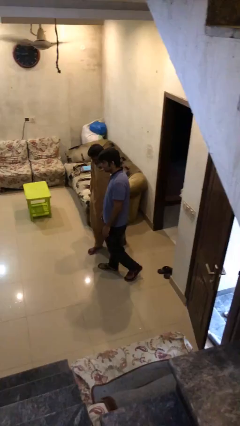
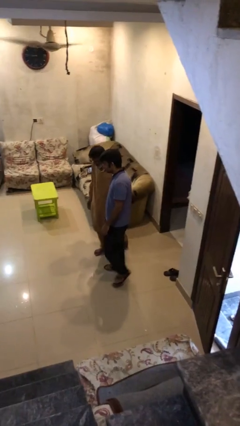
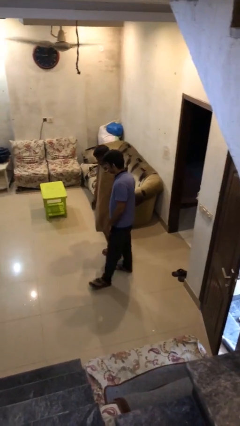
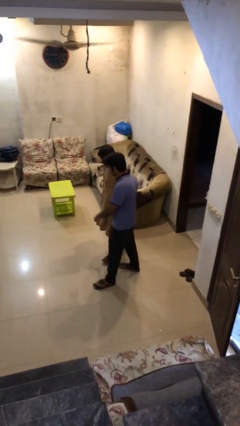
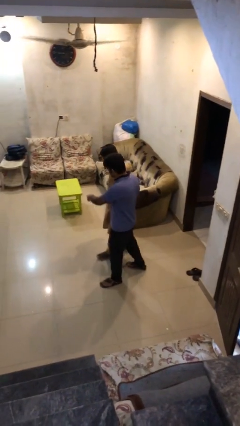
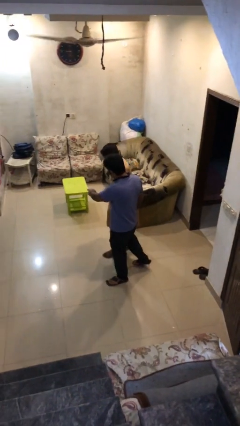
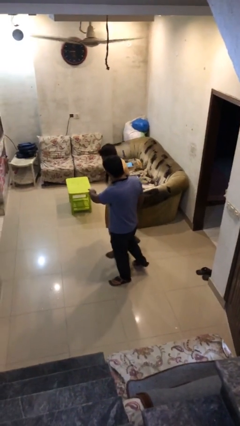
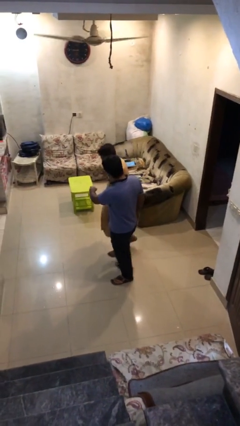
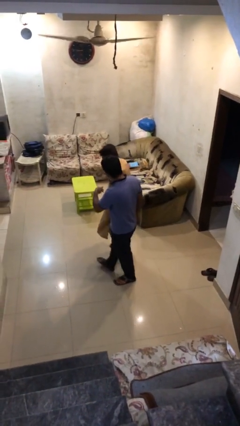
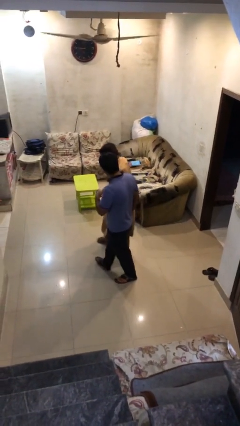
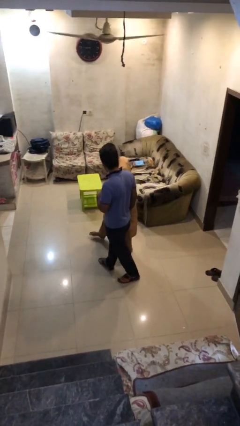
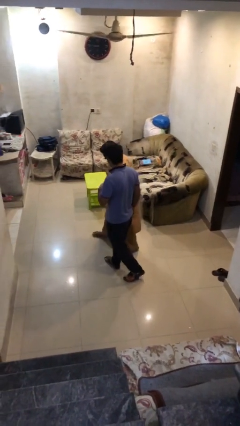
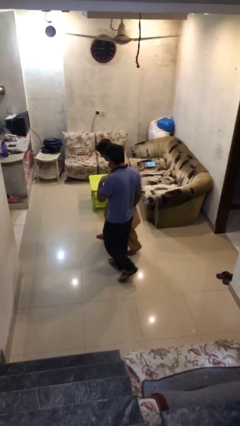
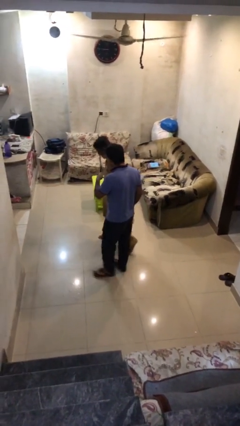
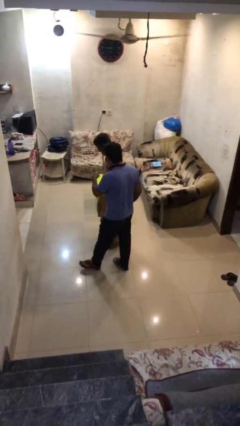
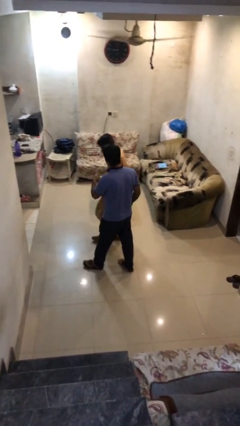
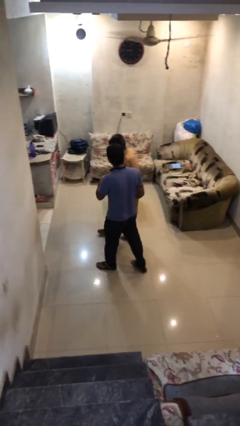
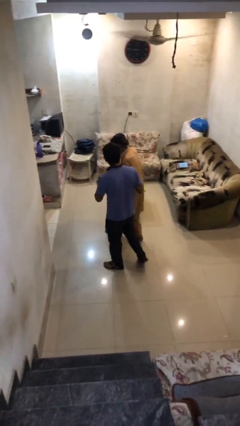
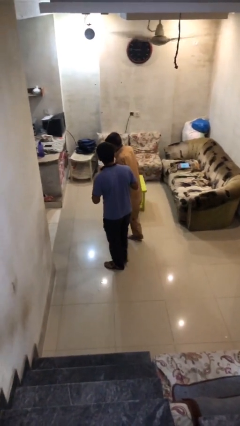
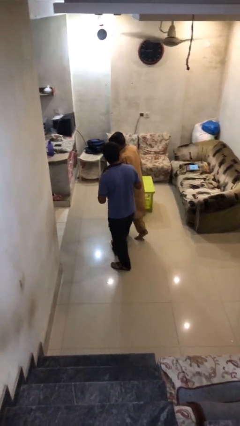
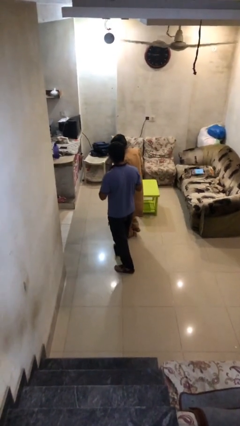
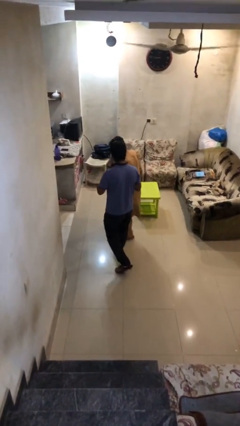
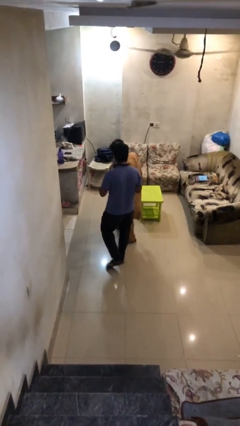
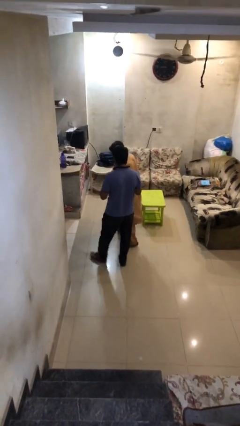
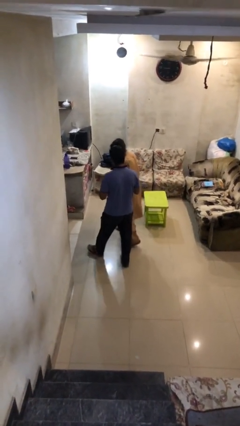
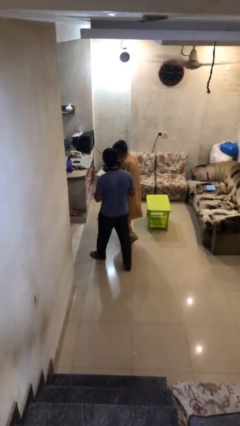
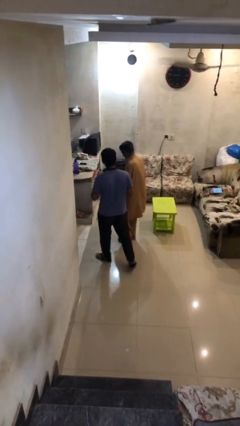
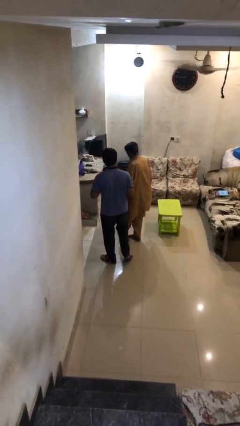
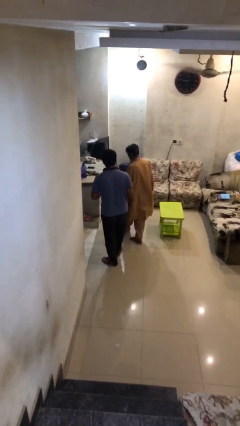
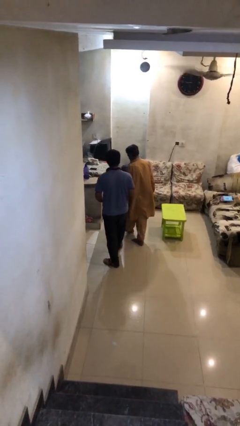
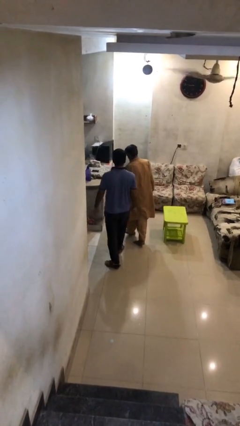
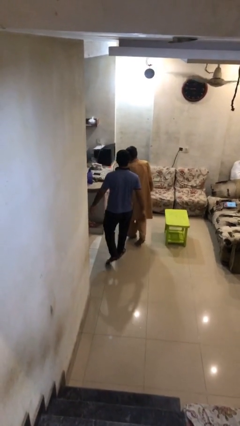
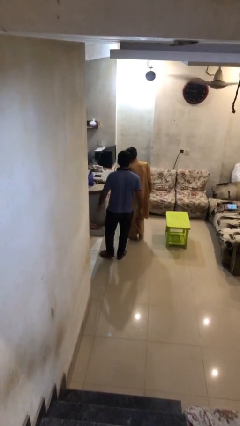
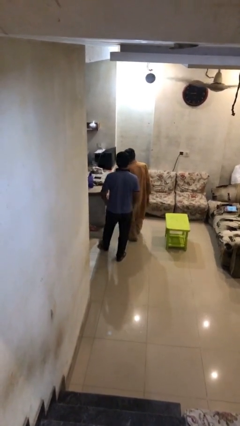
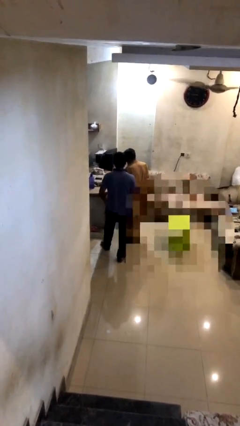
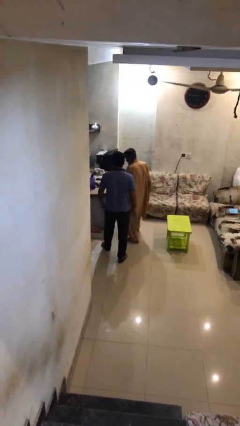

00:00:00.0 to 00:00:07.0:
person talks to person

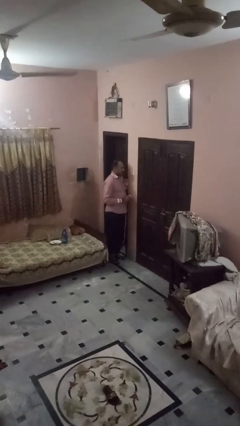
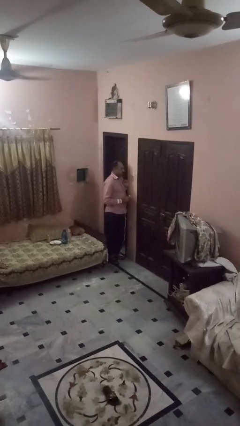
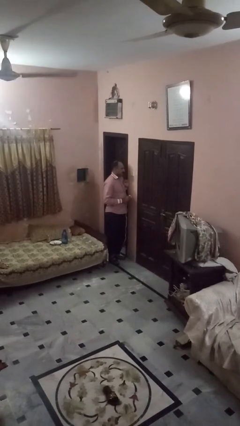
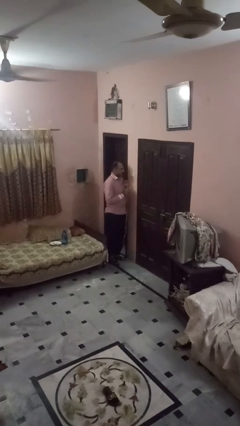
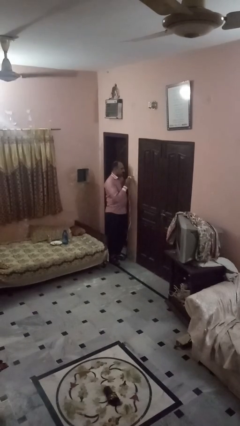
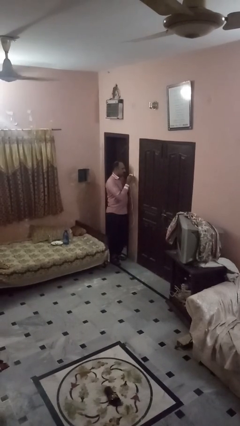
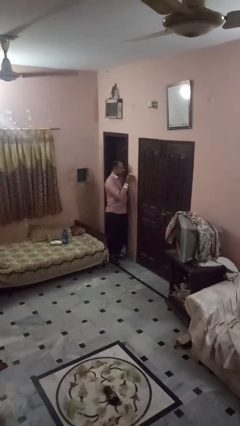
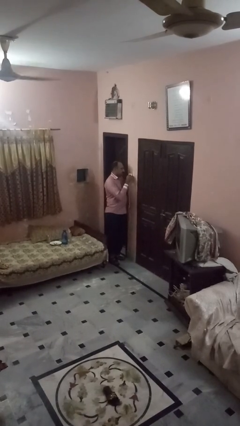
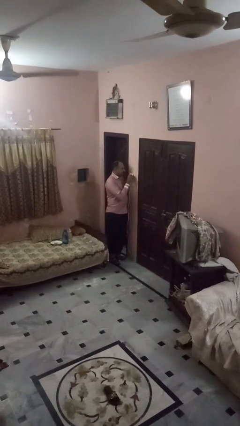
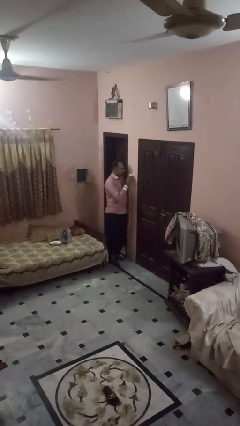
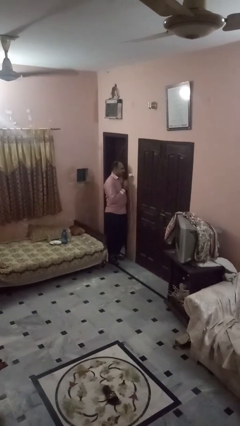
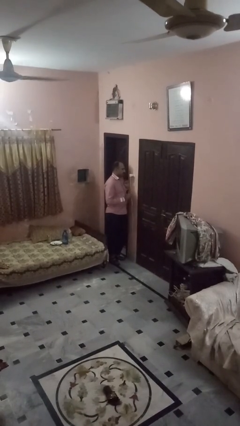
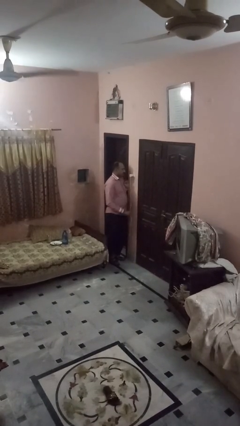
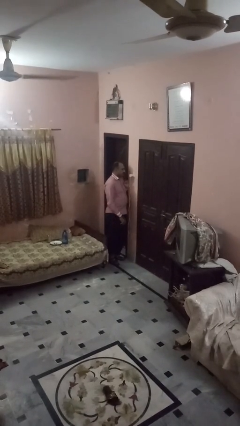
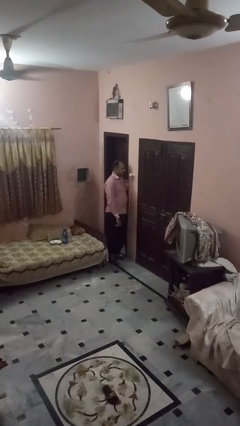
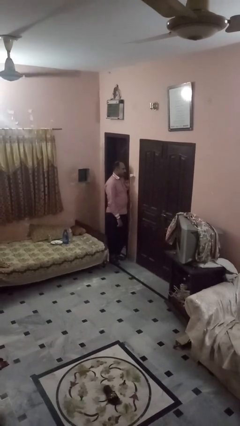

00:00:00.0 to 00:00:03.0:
person plugs into electrical socket

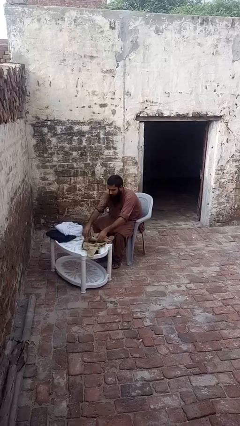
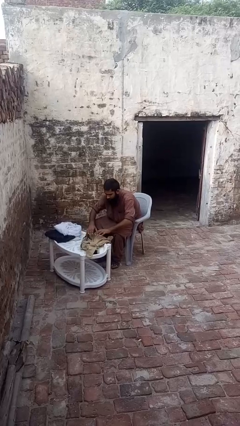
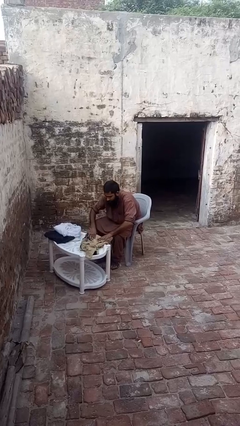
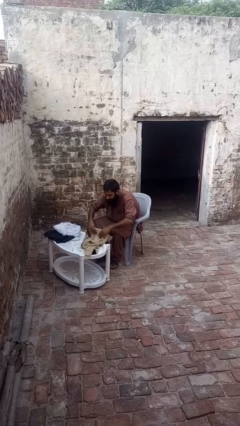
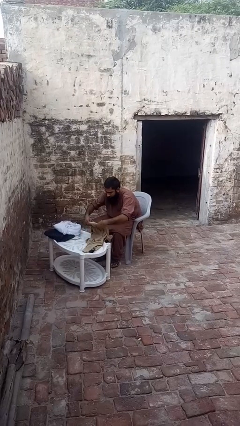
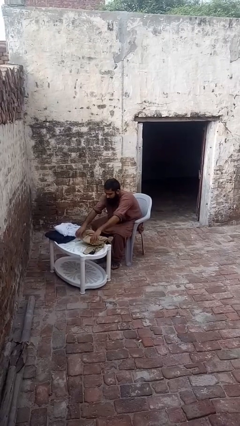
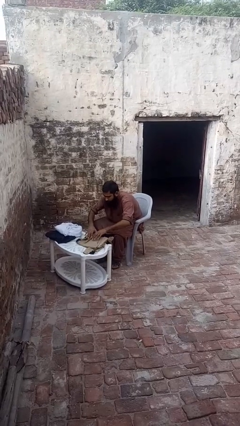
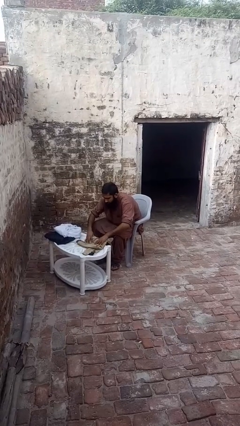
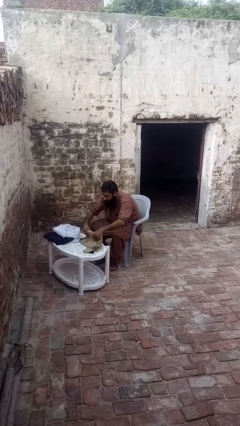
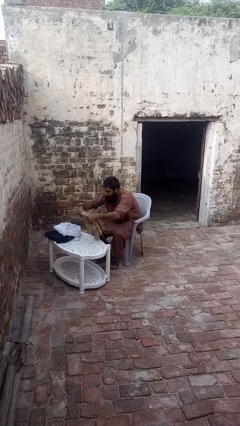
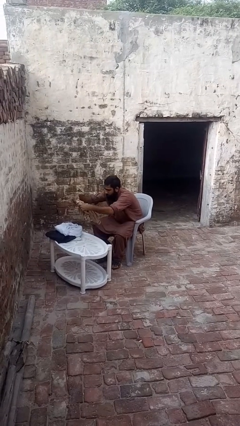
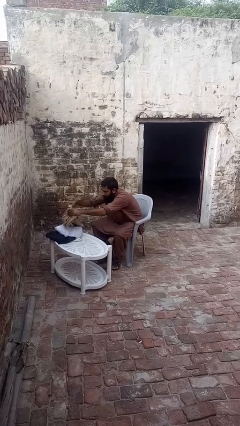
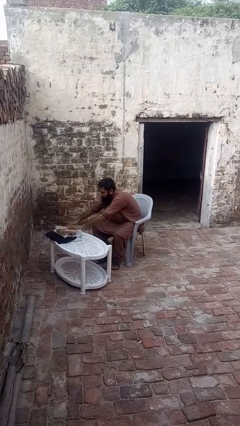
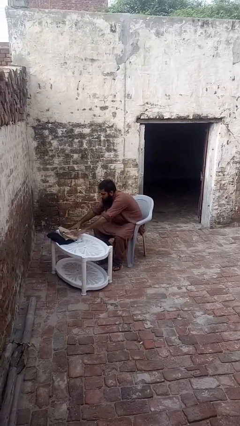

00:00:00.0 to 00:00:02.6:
person folds shirt

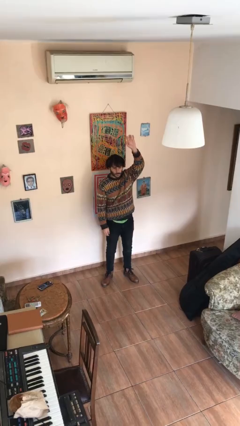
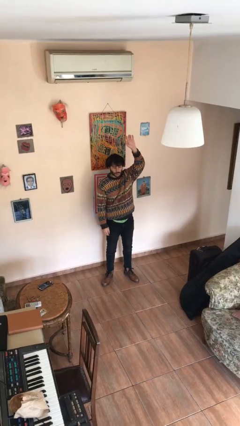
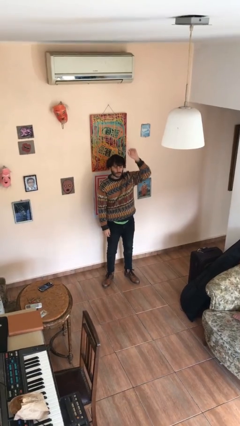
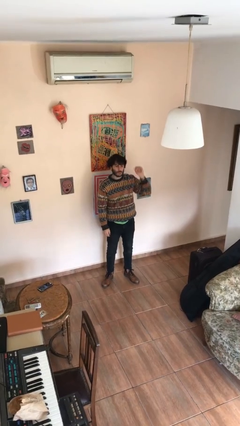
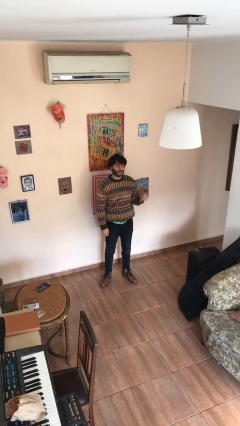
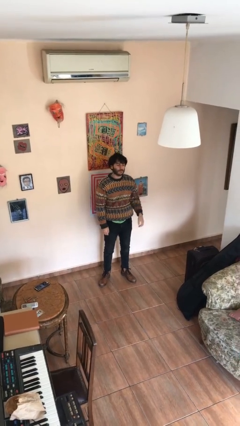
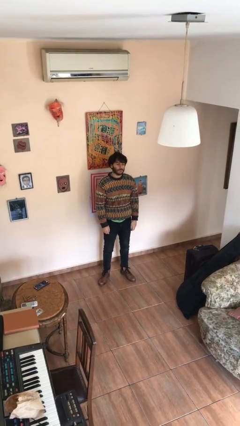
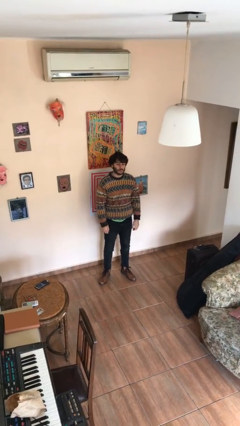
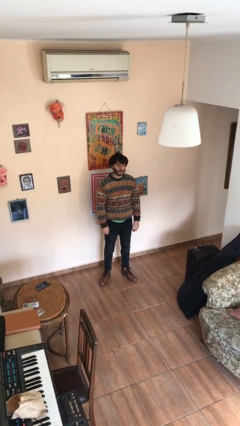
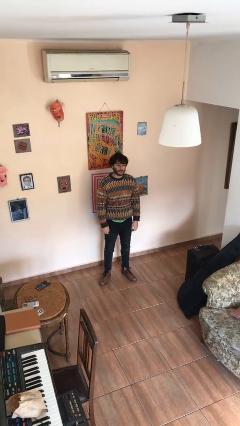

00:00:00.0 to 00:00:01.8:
person gestures lower hand

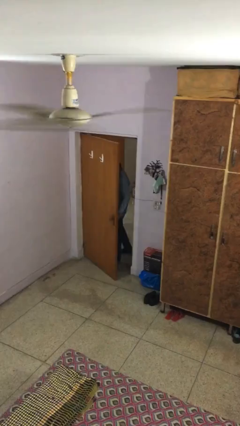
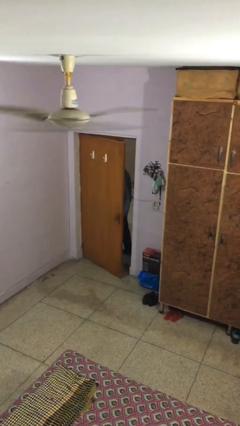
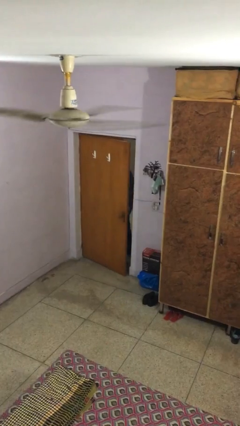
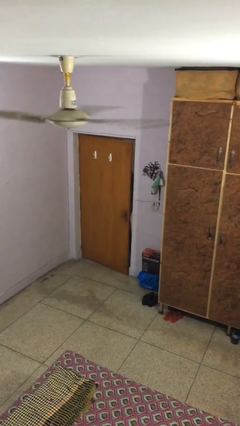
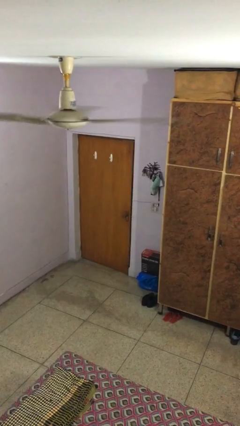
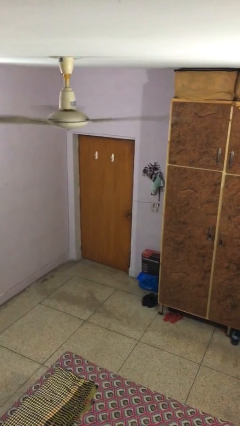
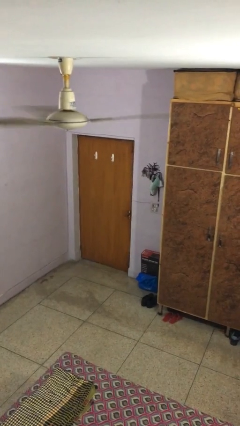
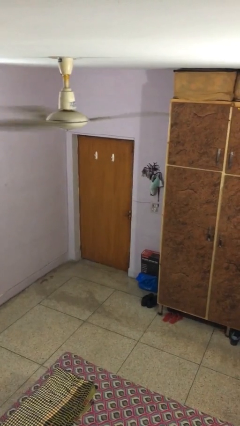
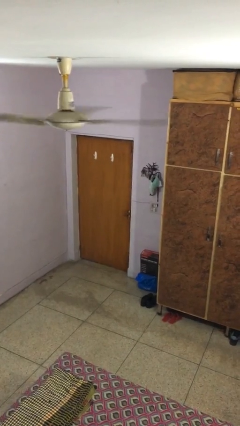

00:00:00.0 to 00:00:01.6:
person closes facility door

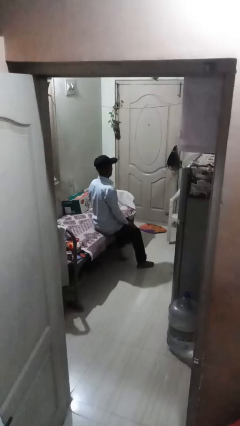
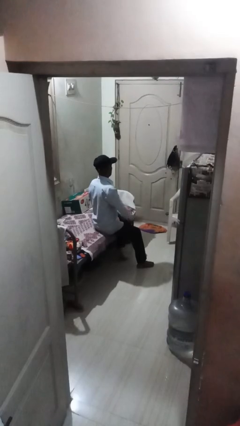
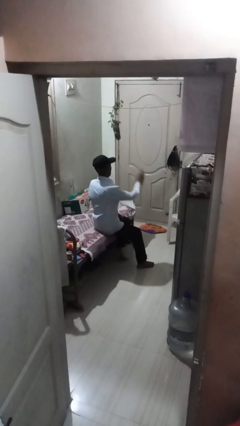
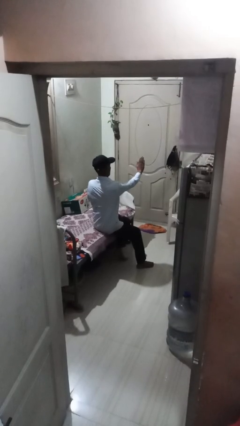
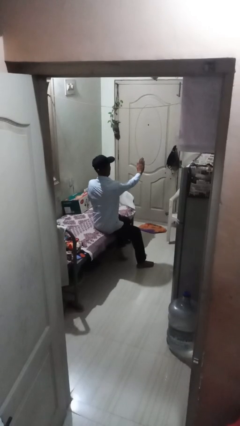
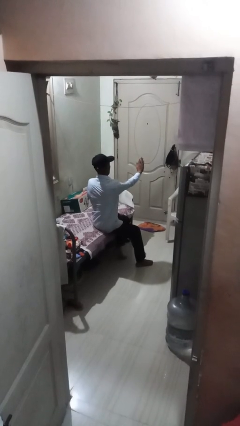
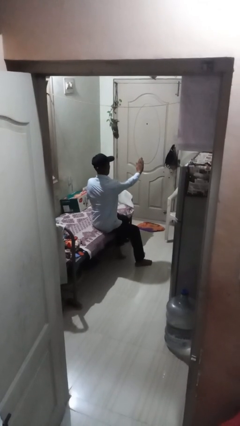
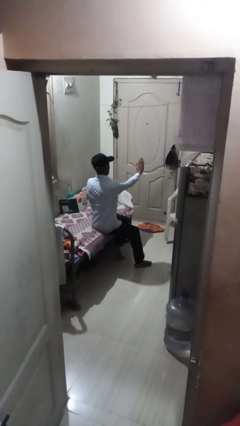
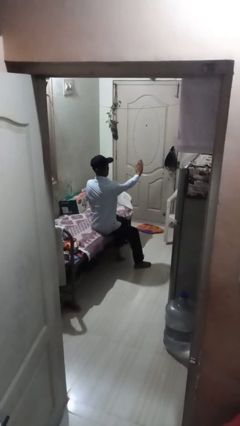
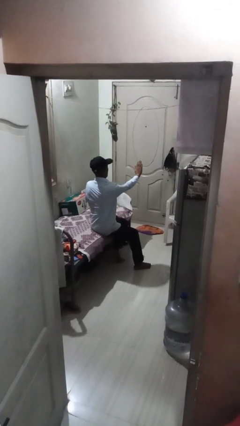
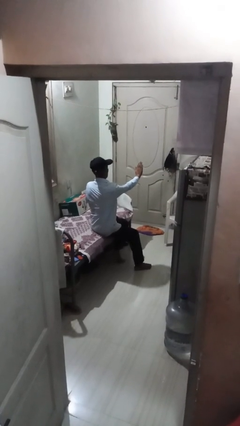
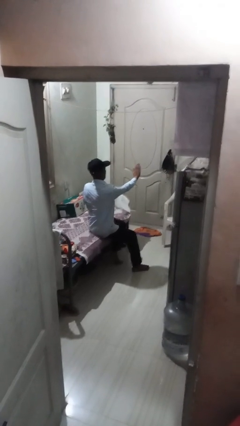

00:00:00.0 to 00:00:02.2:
person gestures stop
